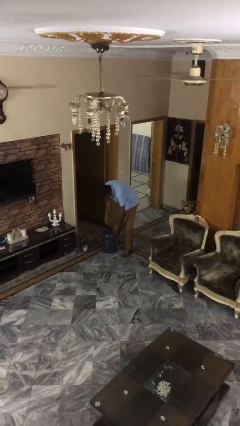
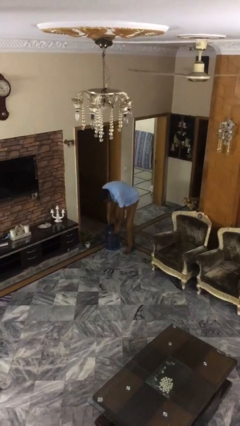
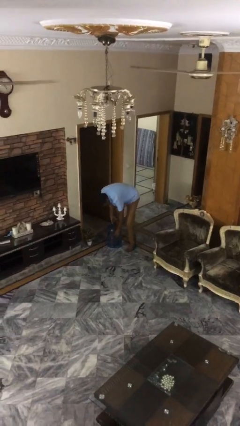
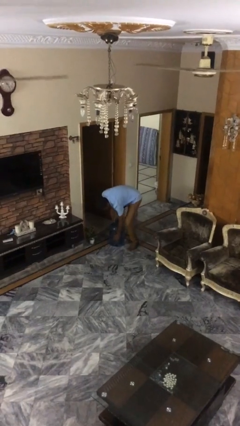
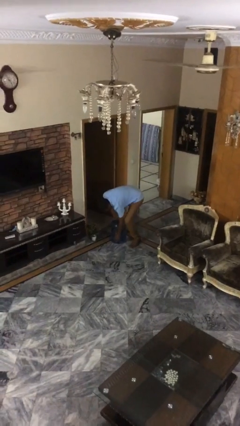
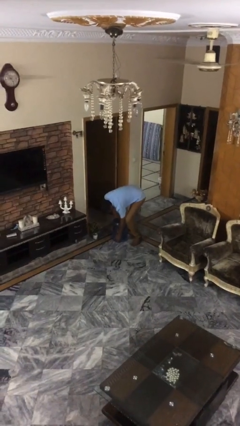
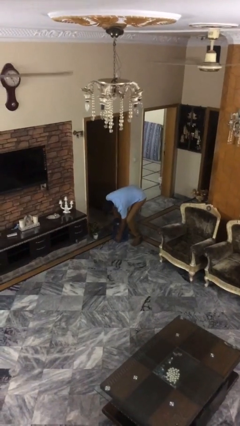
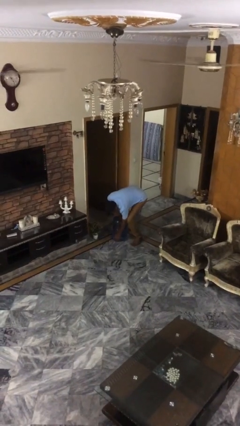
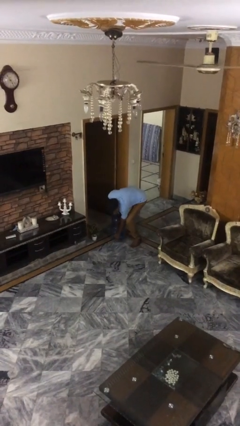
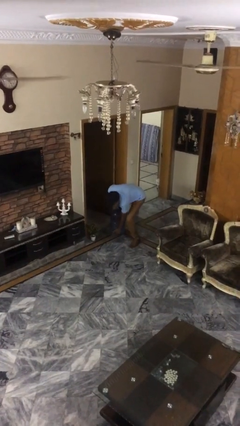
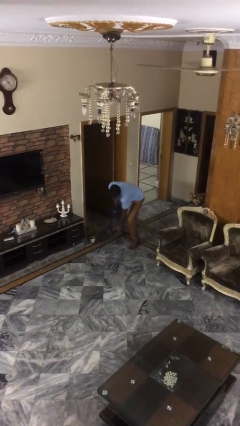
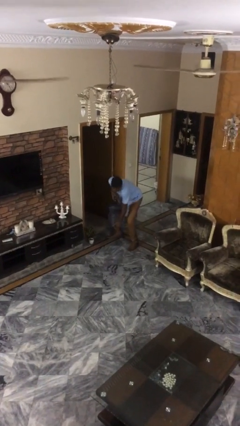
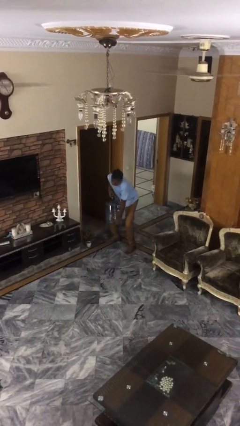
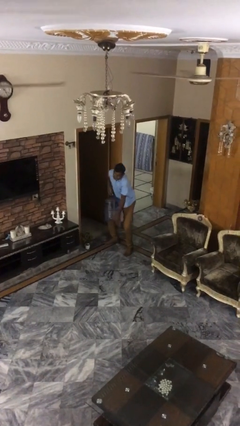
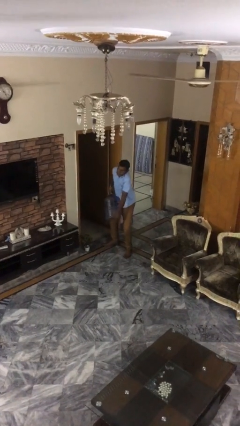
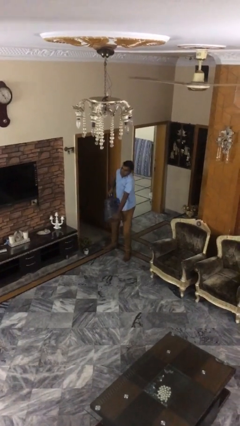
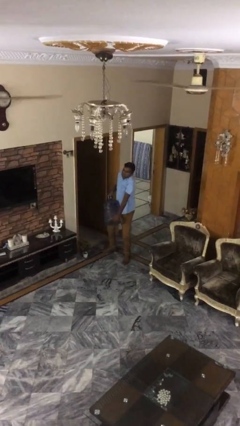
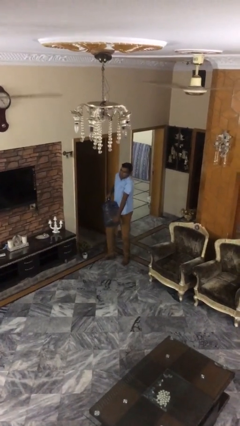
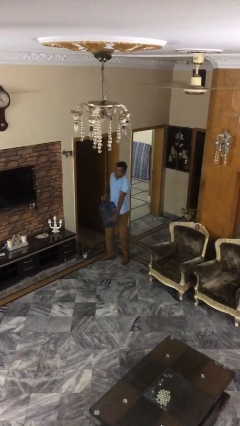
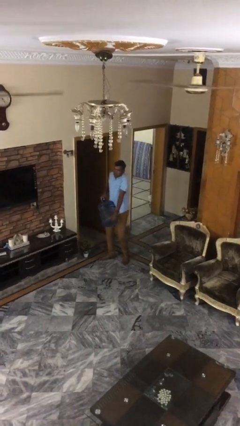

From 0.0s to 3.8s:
person picks up object from floor

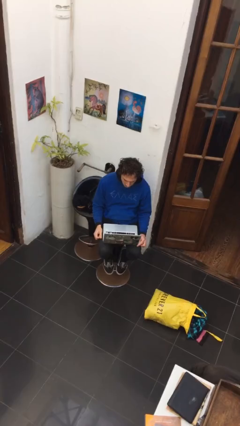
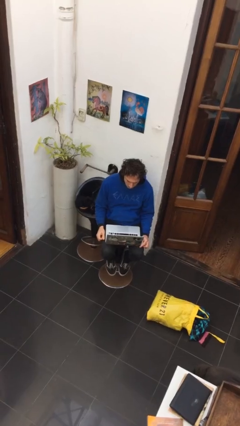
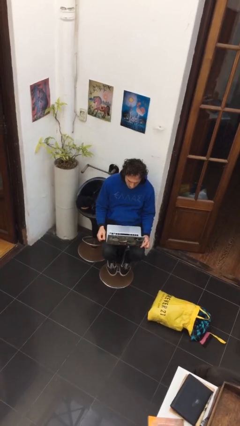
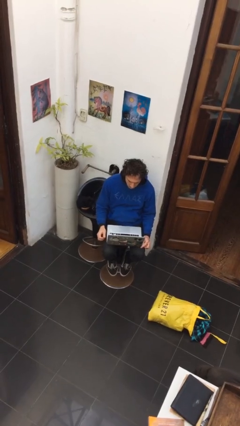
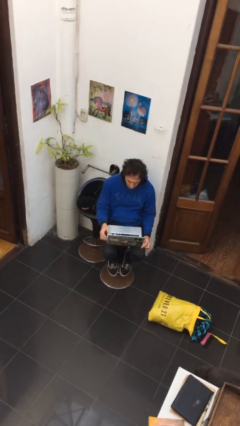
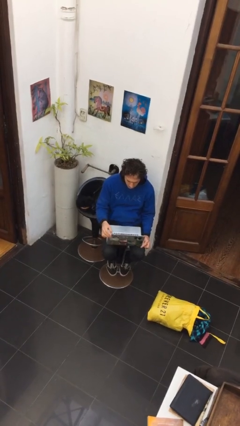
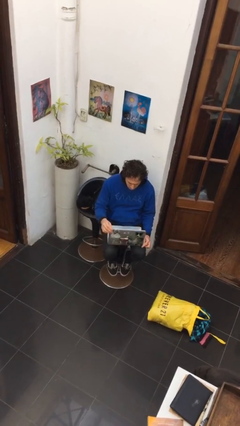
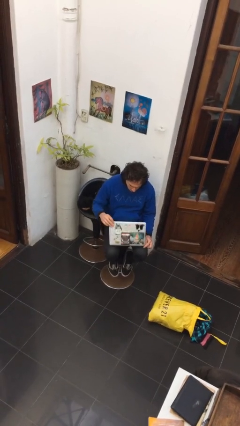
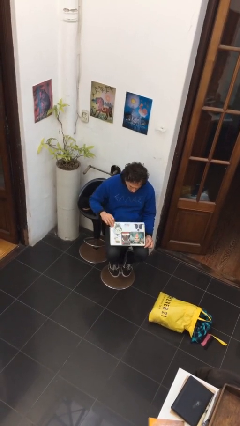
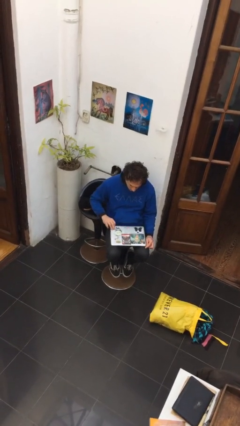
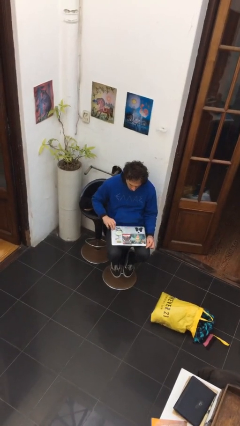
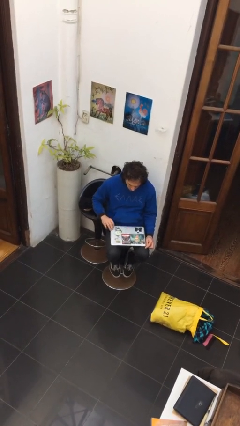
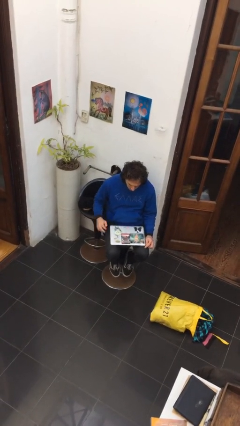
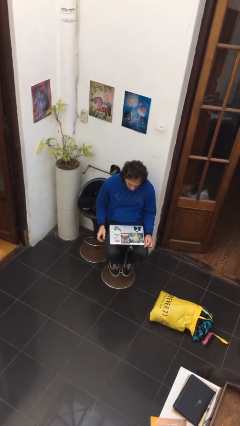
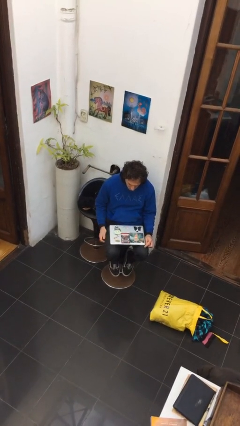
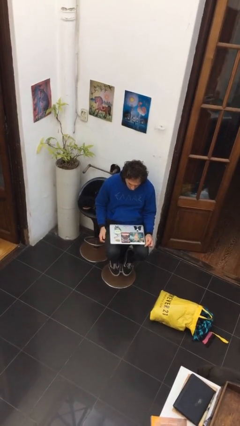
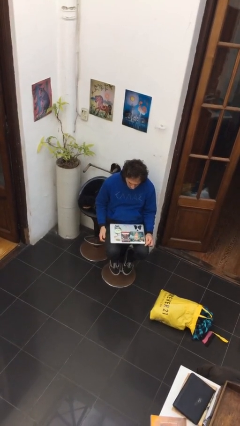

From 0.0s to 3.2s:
person closes laptop

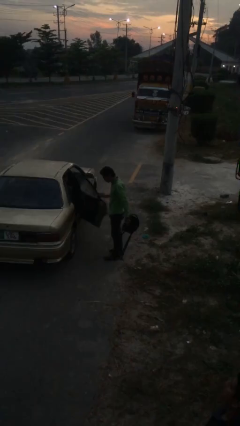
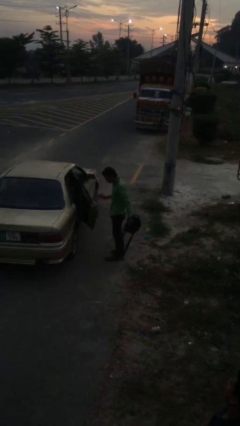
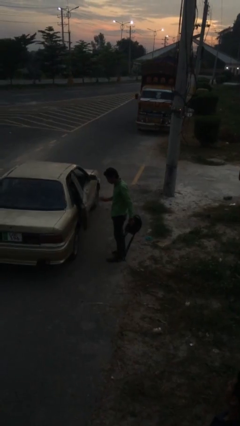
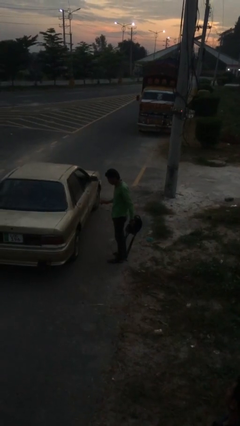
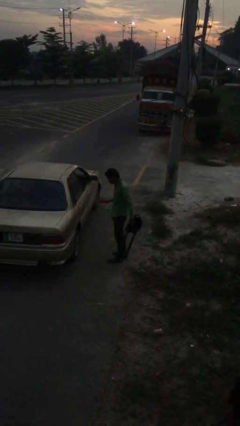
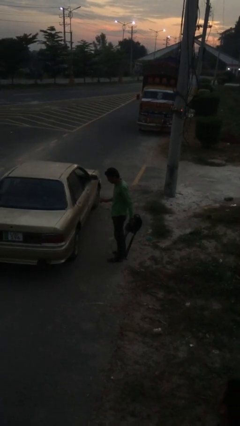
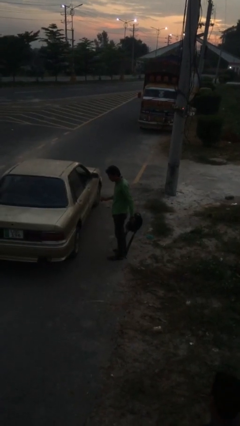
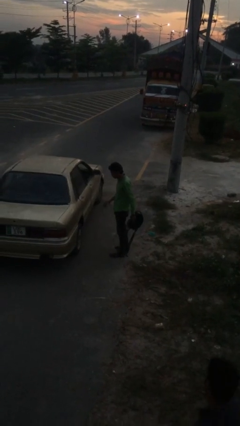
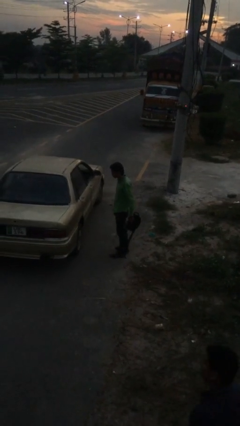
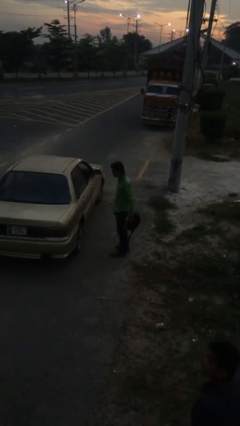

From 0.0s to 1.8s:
person closes car door

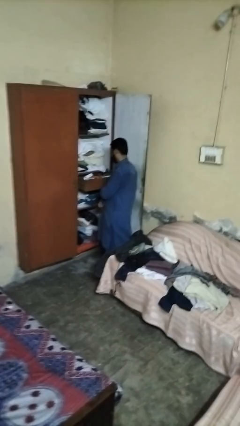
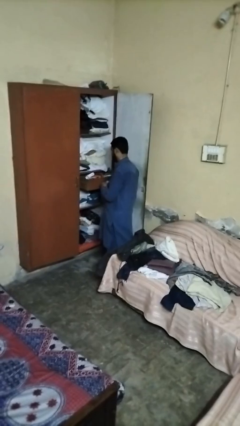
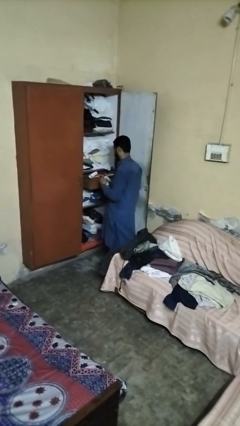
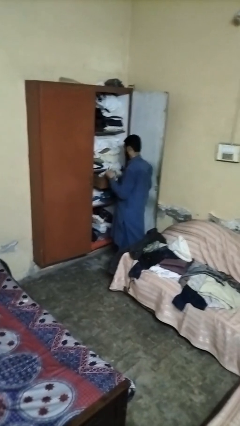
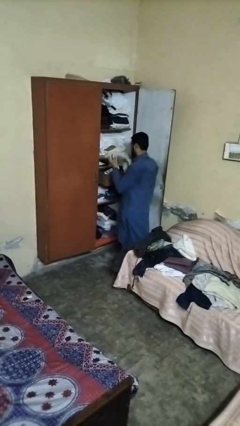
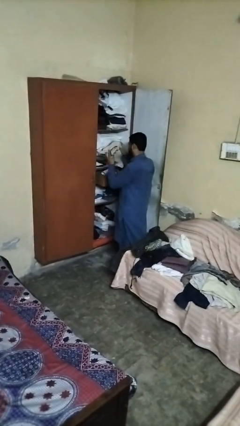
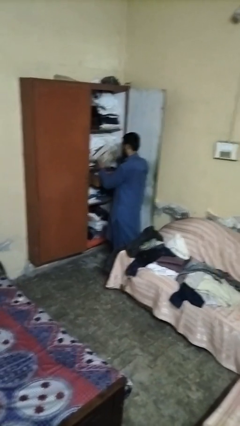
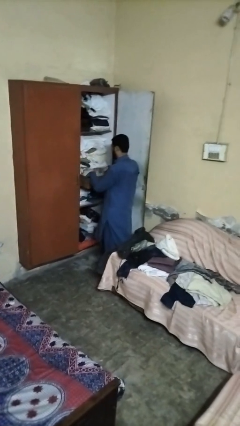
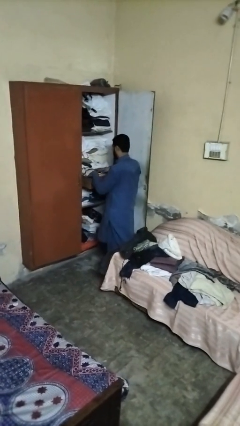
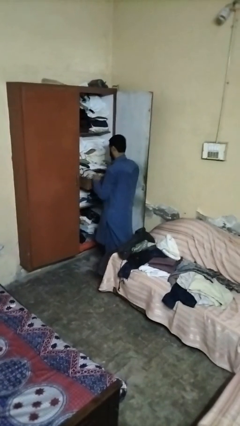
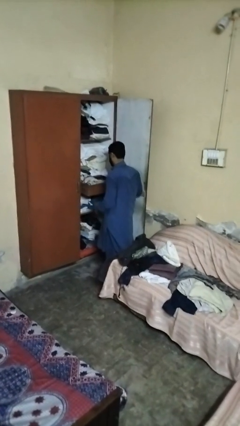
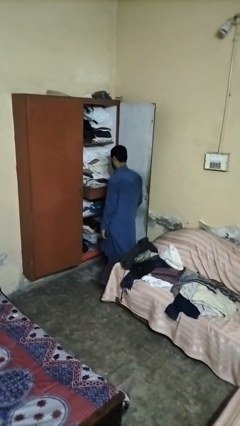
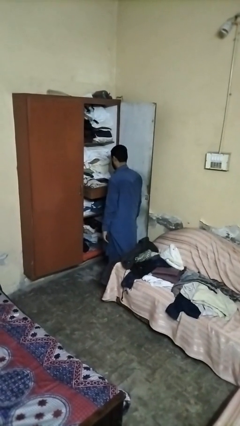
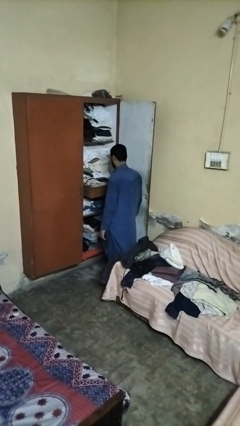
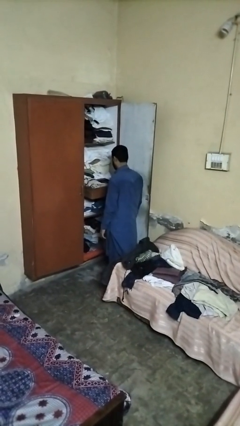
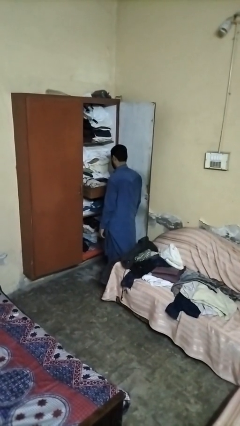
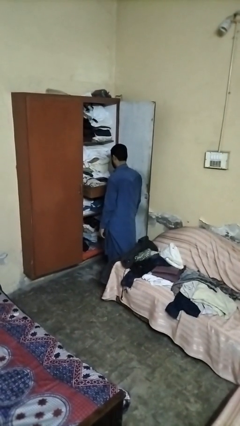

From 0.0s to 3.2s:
person puts clothes into dresser

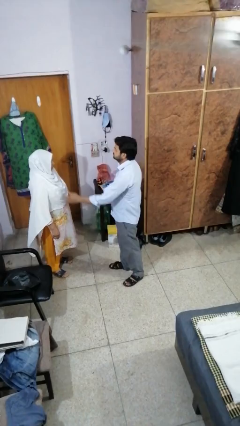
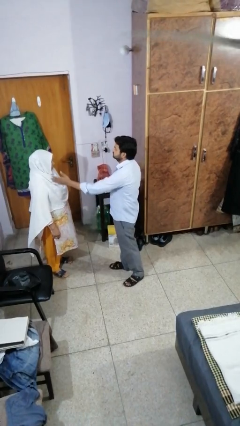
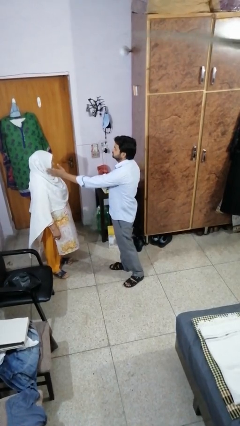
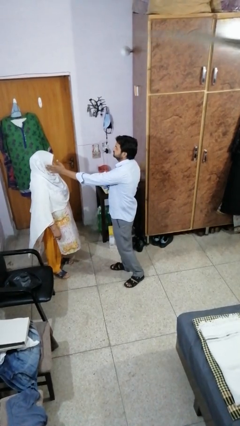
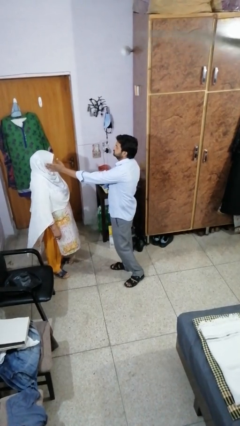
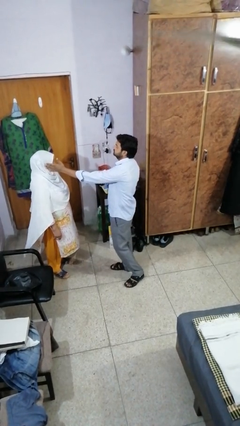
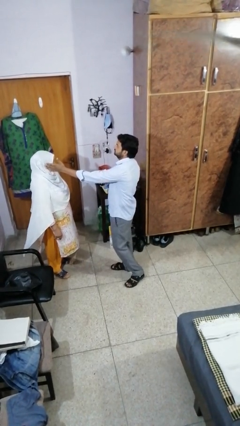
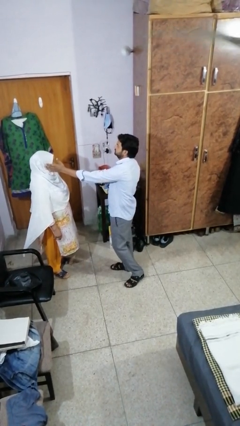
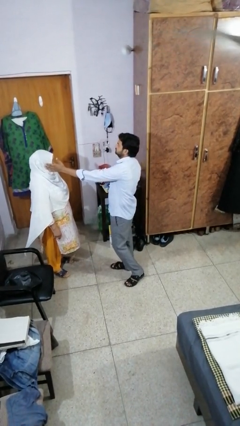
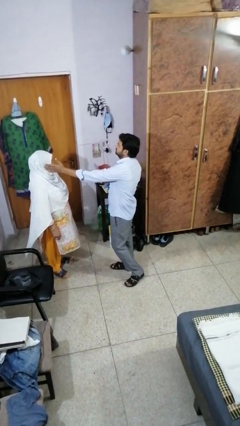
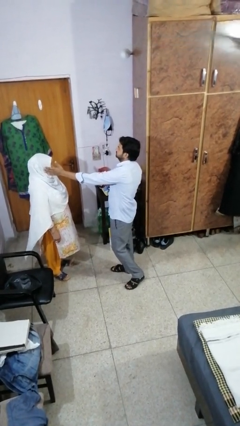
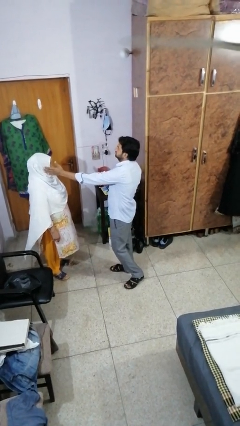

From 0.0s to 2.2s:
person touches face of person

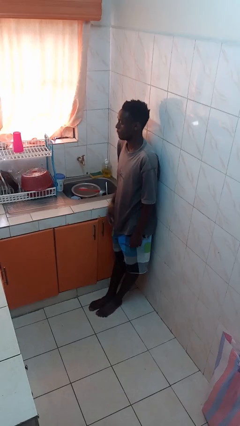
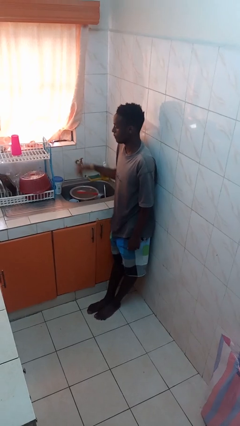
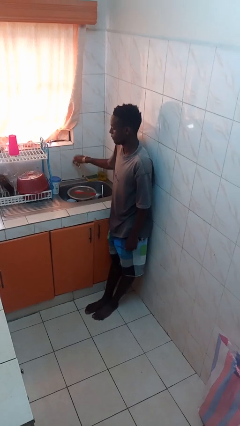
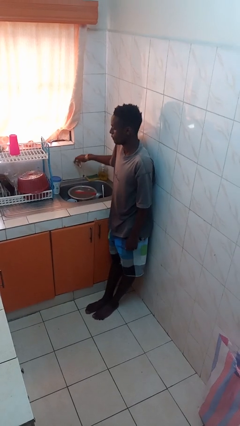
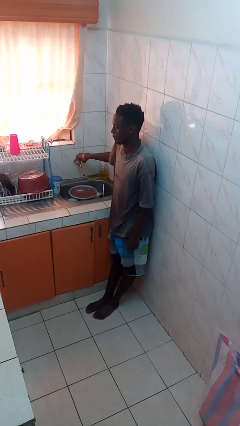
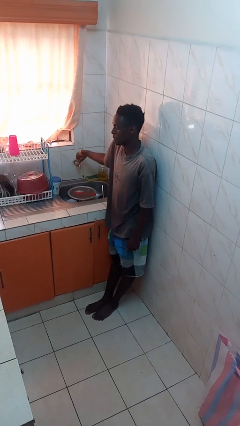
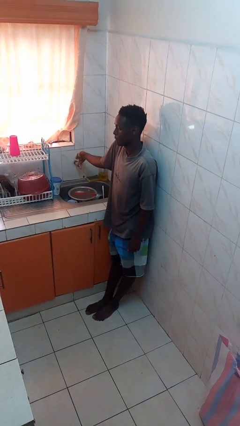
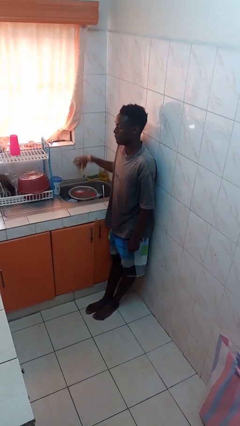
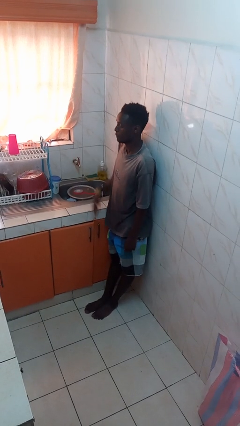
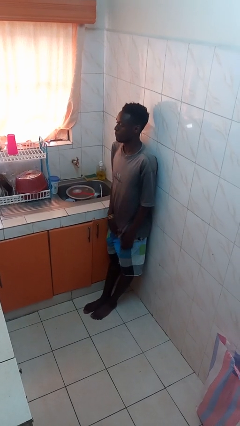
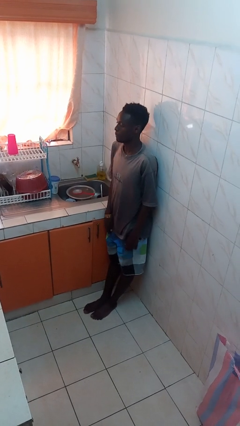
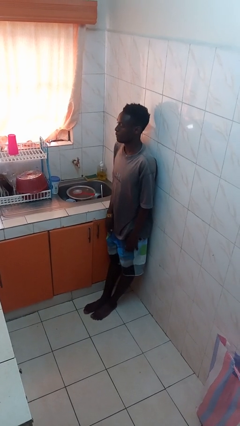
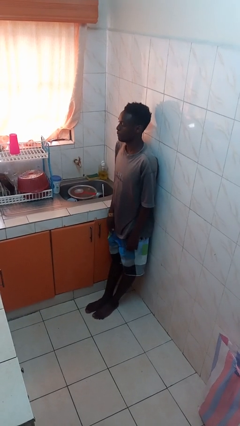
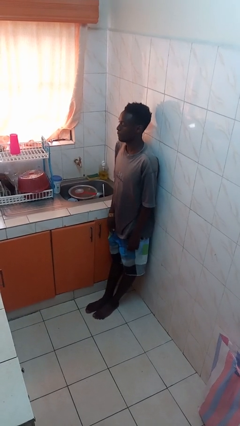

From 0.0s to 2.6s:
person turns off faucet

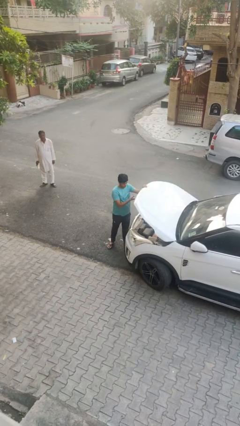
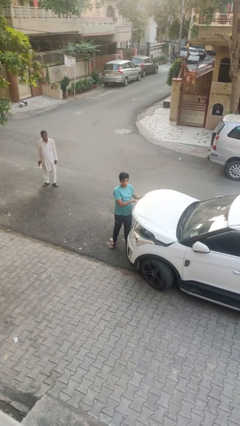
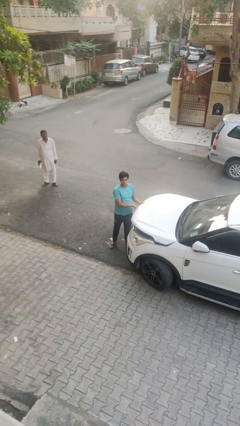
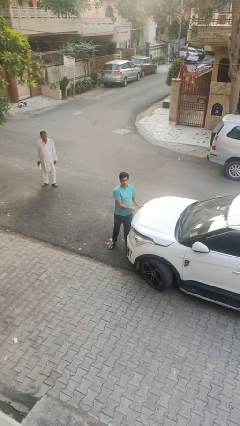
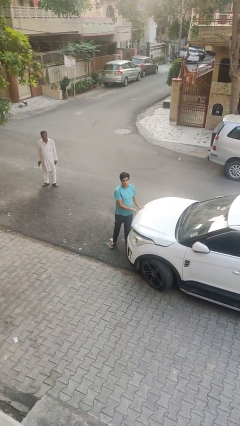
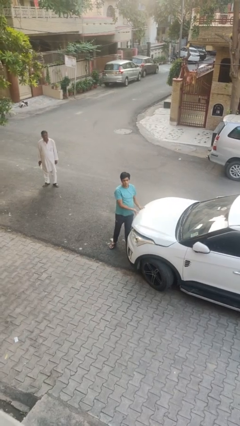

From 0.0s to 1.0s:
person closes car hood
